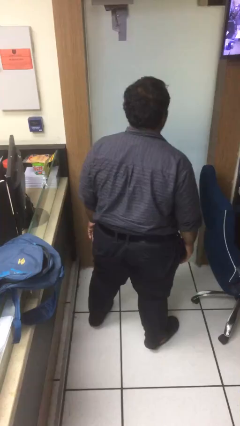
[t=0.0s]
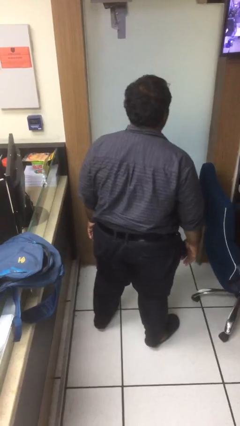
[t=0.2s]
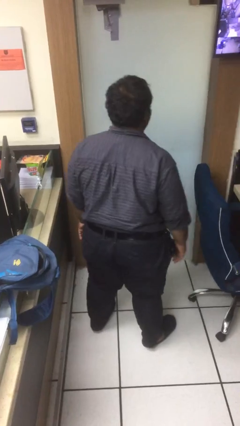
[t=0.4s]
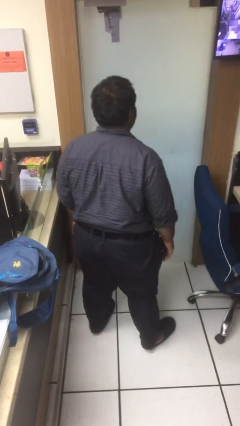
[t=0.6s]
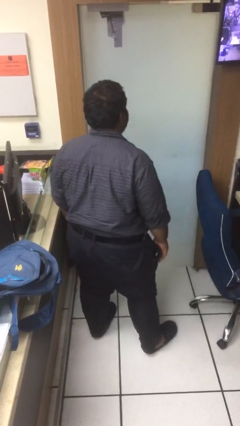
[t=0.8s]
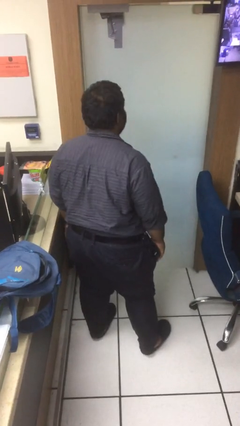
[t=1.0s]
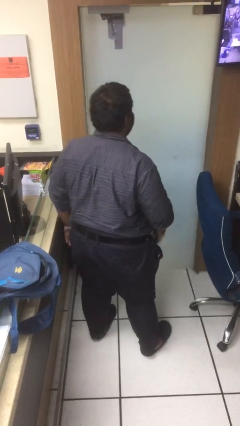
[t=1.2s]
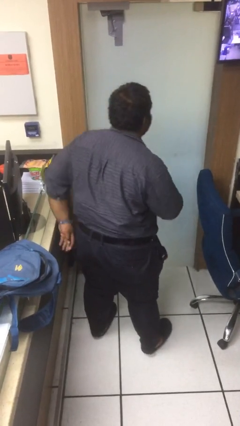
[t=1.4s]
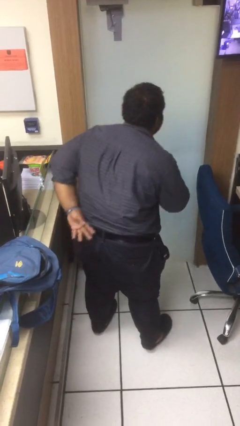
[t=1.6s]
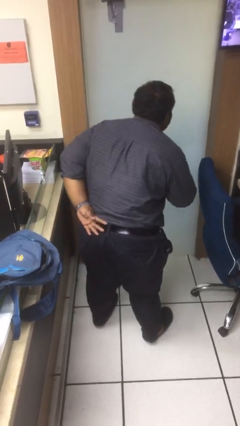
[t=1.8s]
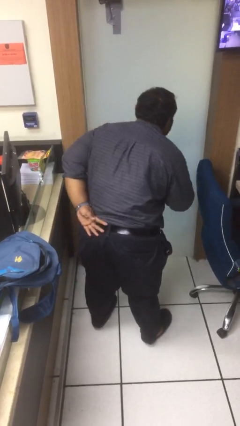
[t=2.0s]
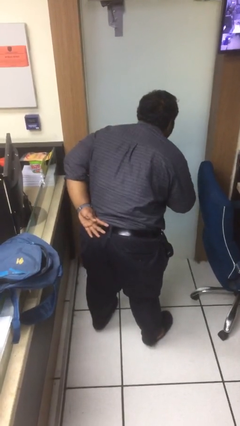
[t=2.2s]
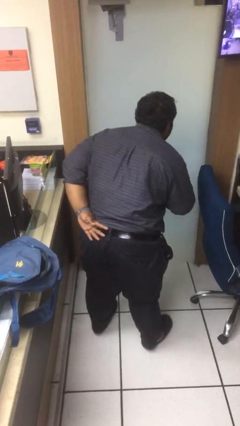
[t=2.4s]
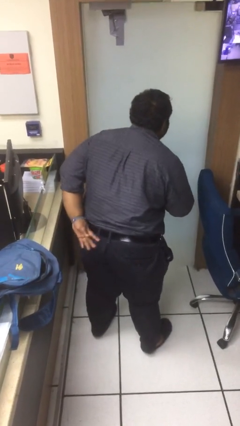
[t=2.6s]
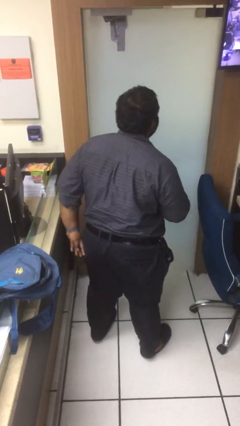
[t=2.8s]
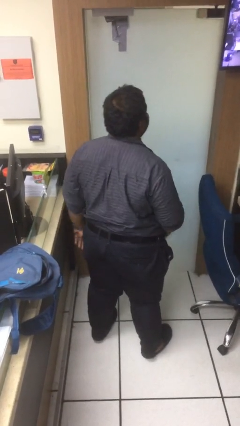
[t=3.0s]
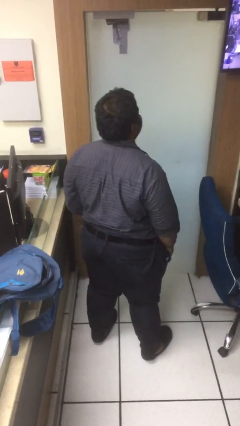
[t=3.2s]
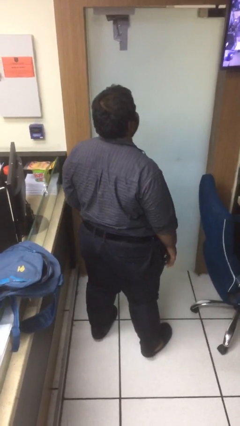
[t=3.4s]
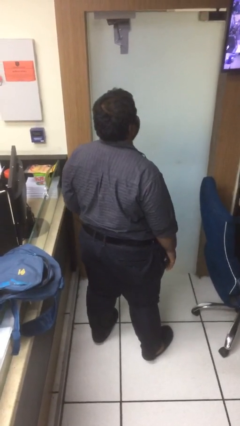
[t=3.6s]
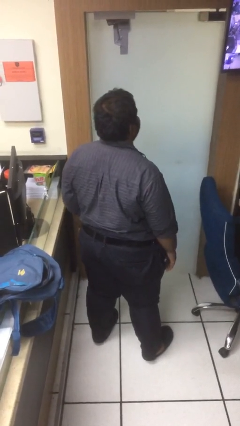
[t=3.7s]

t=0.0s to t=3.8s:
person bows

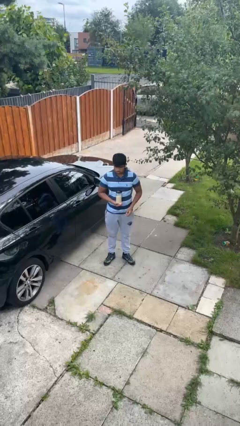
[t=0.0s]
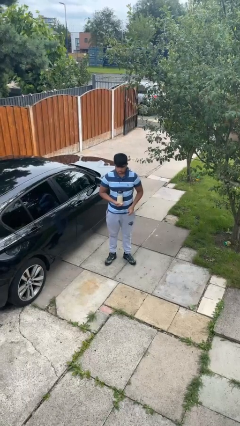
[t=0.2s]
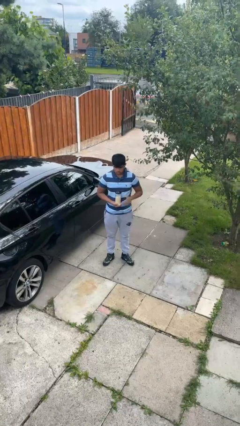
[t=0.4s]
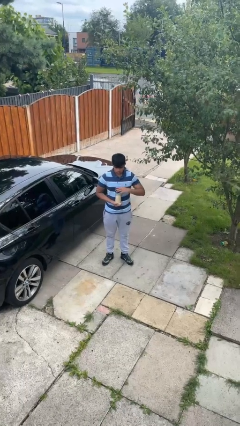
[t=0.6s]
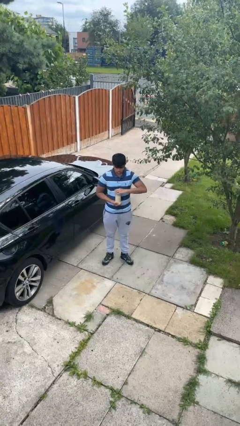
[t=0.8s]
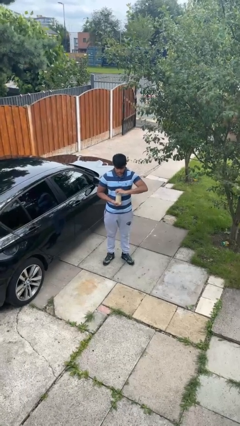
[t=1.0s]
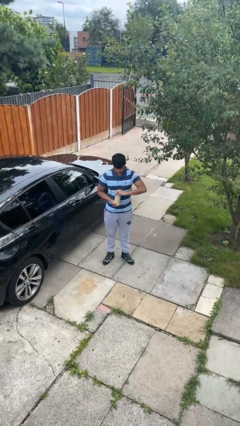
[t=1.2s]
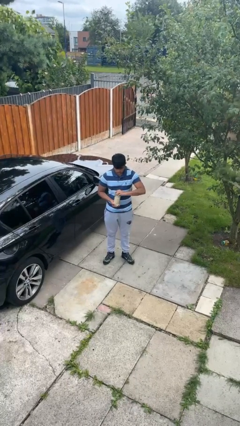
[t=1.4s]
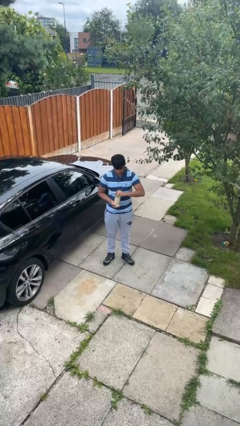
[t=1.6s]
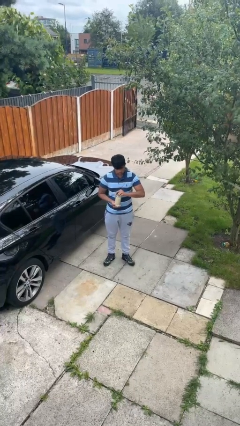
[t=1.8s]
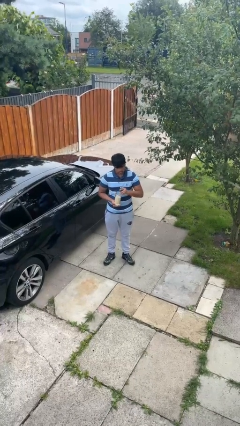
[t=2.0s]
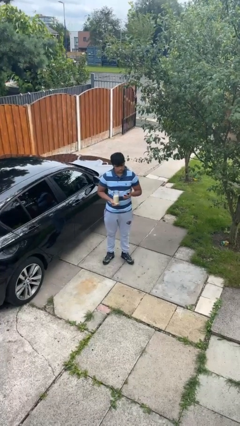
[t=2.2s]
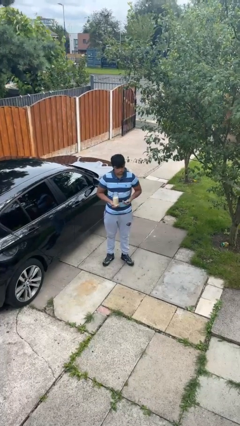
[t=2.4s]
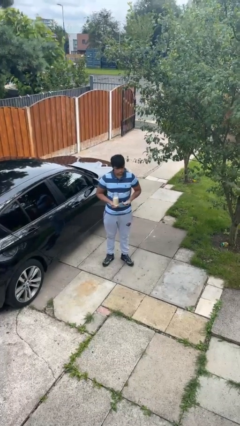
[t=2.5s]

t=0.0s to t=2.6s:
person opens jar

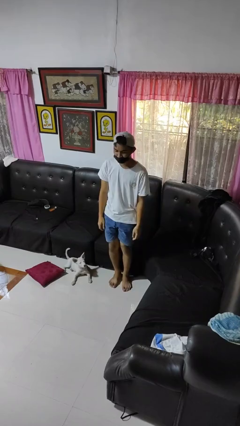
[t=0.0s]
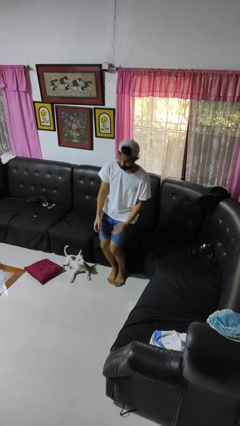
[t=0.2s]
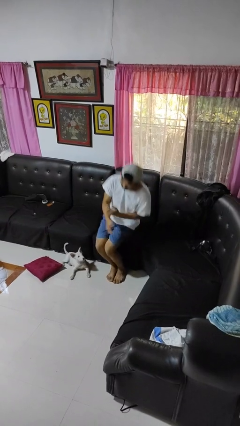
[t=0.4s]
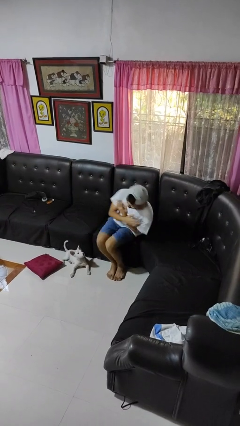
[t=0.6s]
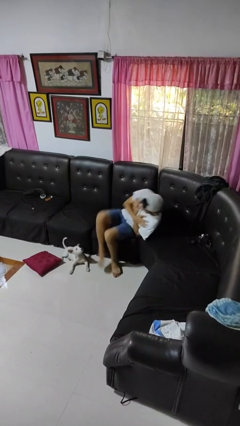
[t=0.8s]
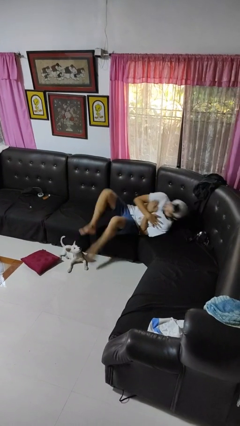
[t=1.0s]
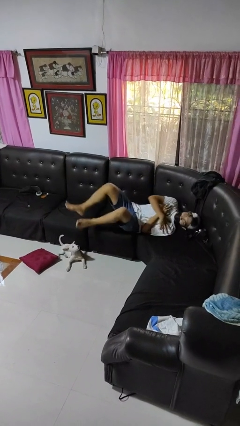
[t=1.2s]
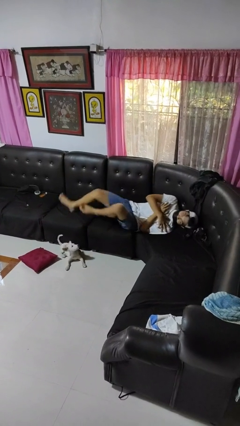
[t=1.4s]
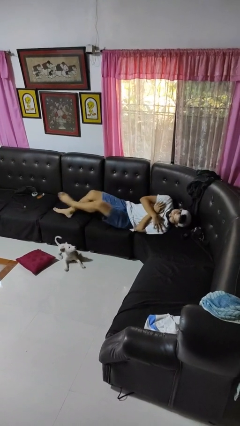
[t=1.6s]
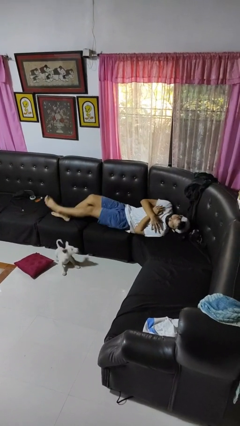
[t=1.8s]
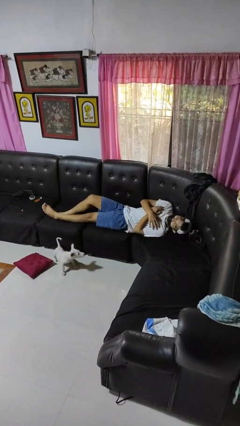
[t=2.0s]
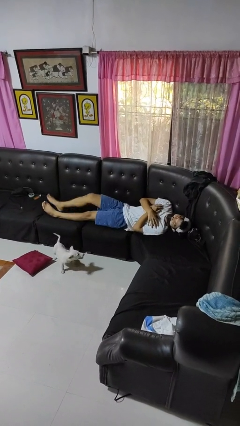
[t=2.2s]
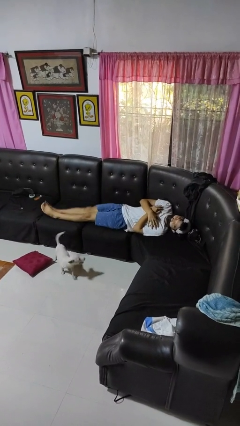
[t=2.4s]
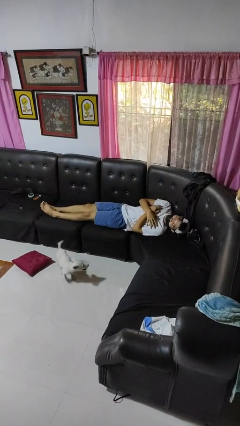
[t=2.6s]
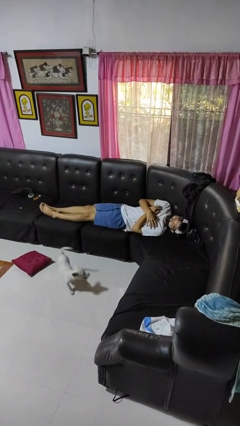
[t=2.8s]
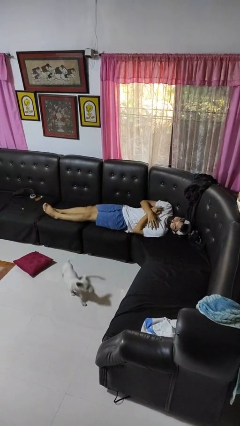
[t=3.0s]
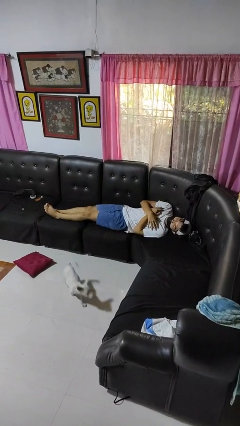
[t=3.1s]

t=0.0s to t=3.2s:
person lies down on couch

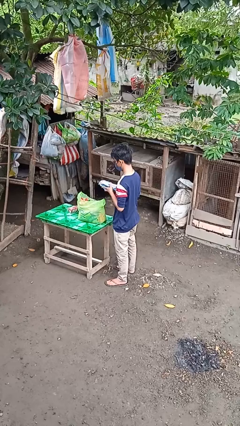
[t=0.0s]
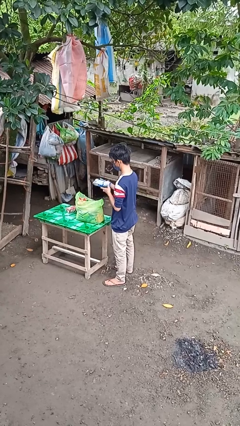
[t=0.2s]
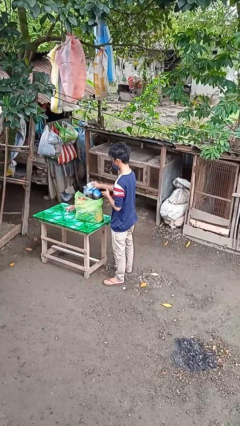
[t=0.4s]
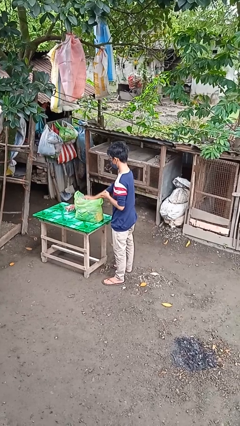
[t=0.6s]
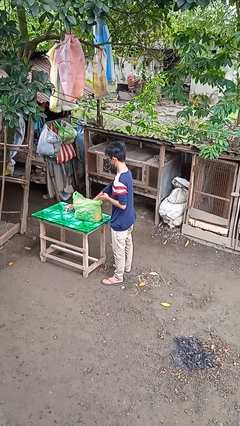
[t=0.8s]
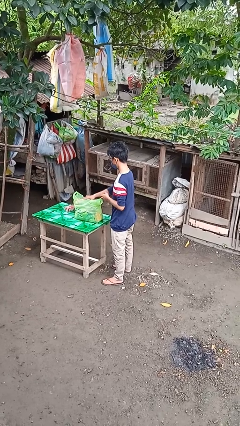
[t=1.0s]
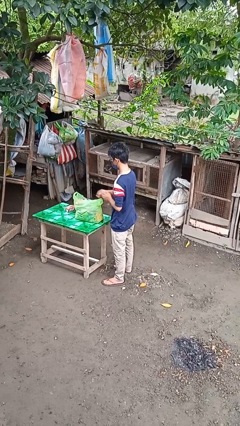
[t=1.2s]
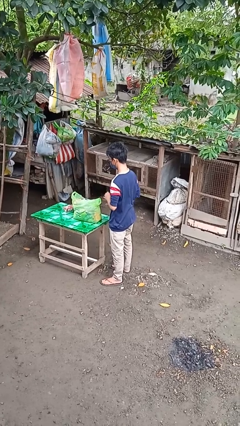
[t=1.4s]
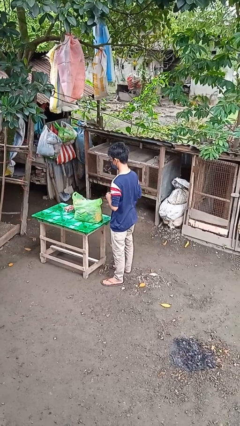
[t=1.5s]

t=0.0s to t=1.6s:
person puts object into bag

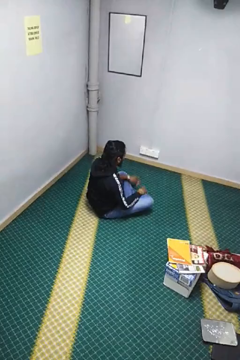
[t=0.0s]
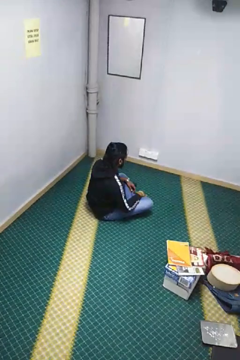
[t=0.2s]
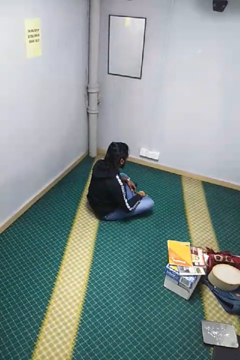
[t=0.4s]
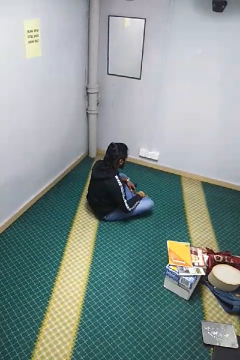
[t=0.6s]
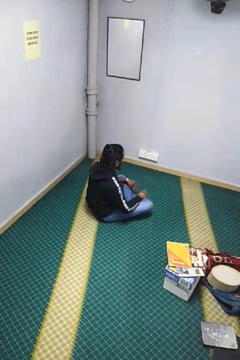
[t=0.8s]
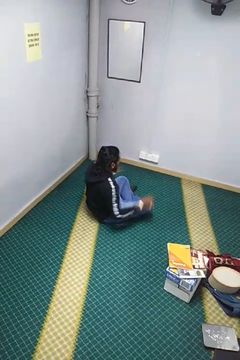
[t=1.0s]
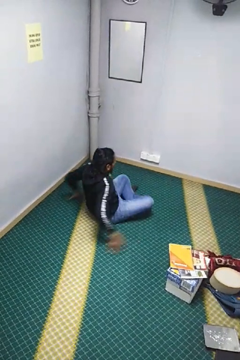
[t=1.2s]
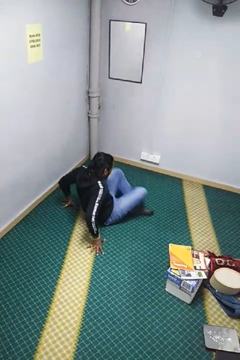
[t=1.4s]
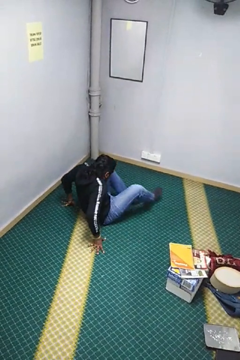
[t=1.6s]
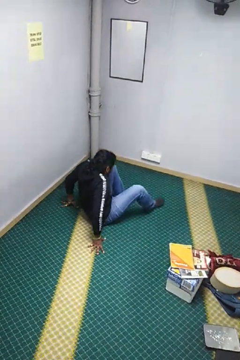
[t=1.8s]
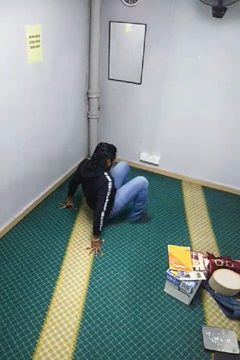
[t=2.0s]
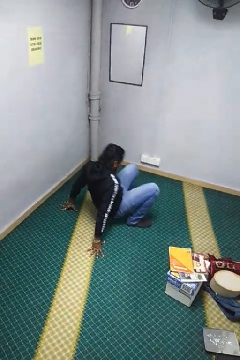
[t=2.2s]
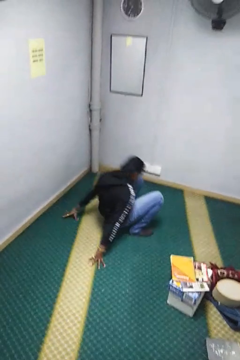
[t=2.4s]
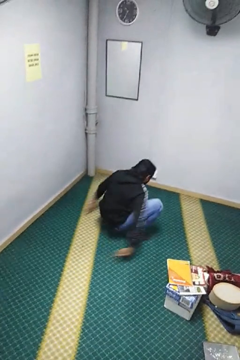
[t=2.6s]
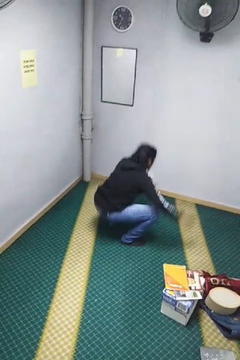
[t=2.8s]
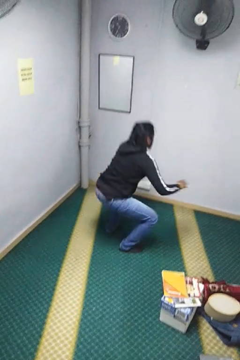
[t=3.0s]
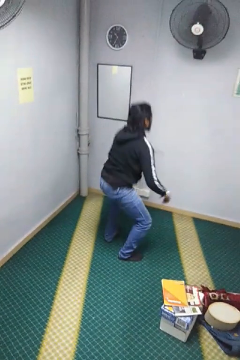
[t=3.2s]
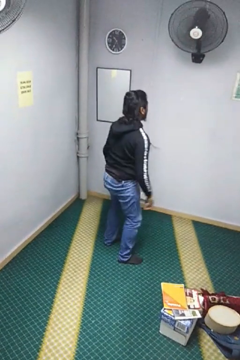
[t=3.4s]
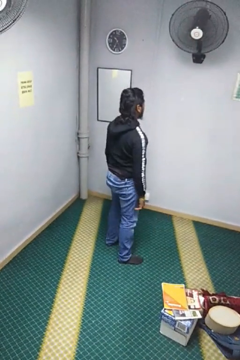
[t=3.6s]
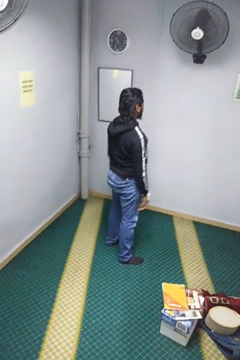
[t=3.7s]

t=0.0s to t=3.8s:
person stands up from floor

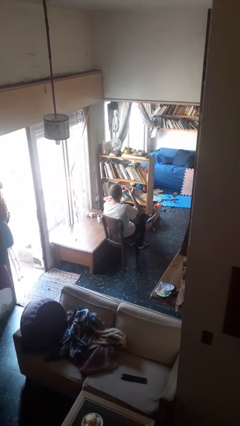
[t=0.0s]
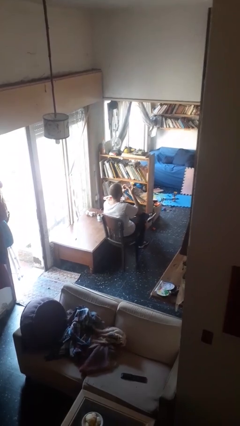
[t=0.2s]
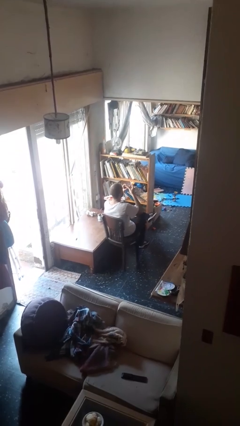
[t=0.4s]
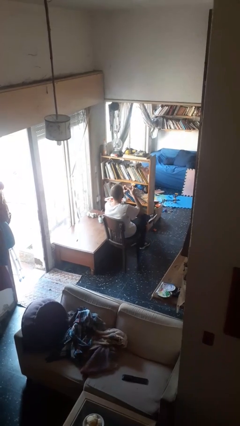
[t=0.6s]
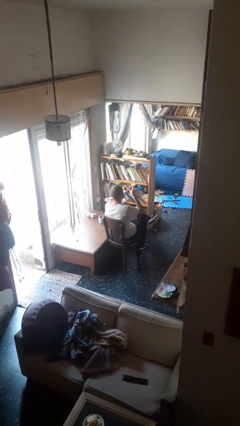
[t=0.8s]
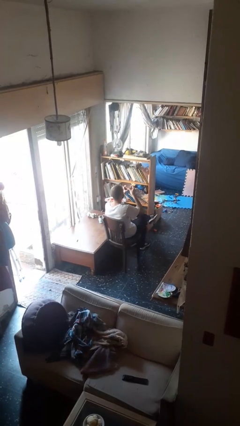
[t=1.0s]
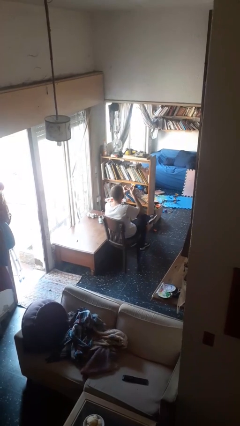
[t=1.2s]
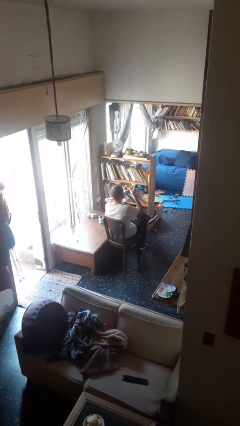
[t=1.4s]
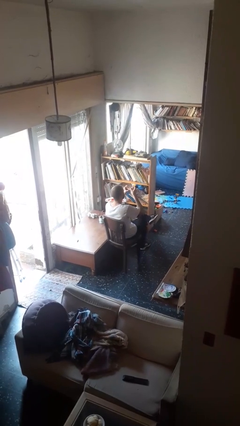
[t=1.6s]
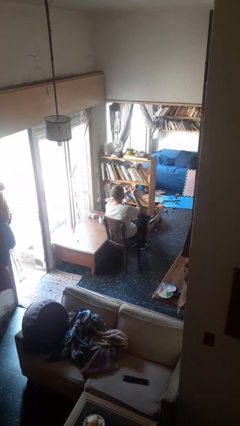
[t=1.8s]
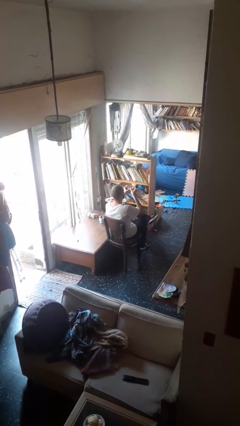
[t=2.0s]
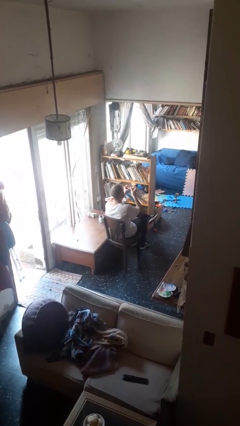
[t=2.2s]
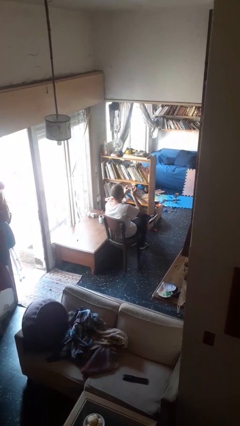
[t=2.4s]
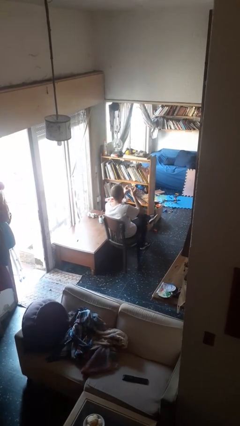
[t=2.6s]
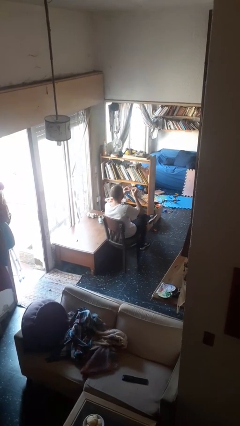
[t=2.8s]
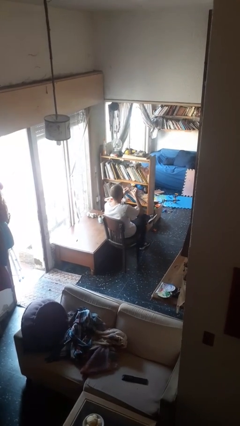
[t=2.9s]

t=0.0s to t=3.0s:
person clips fingernails
